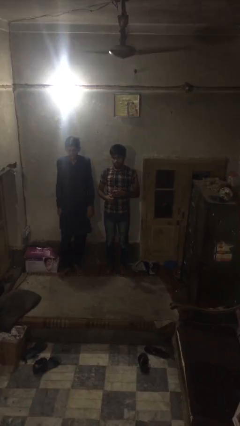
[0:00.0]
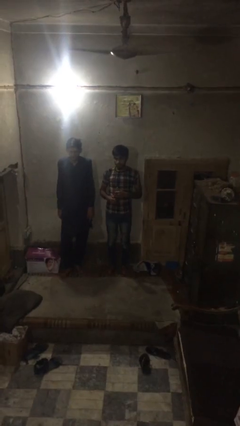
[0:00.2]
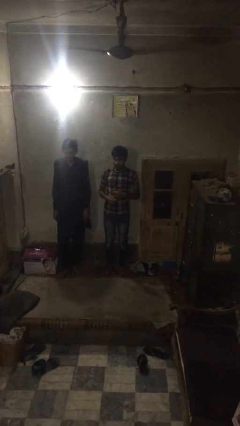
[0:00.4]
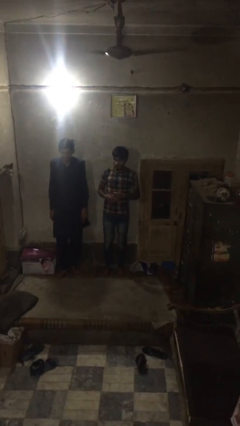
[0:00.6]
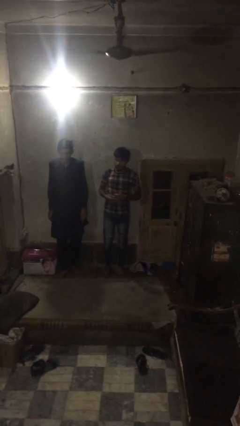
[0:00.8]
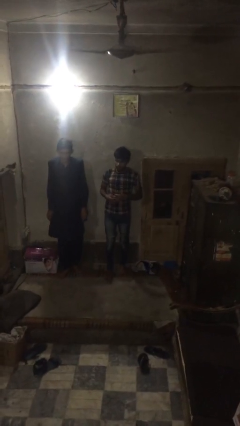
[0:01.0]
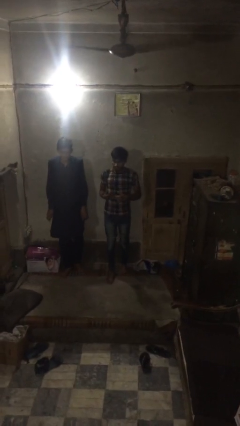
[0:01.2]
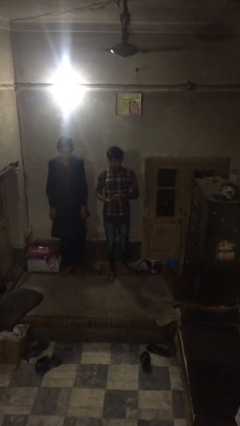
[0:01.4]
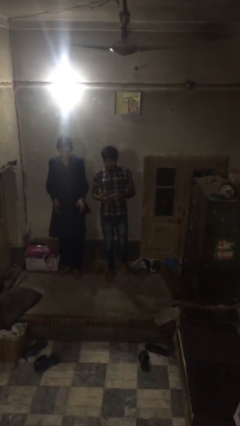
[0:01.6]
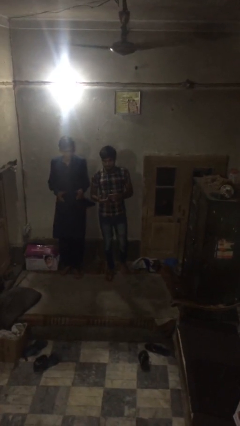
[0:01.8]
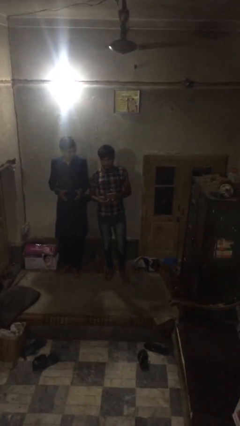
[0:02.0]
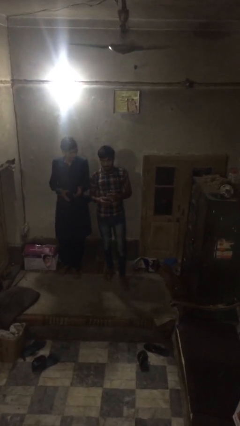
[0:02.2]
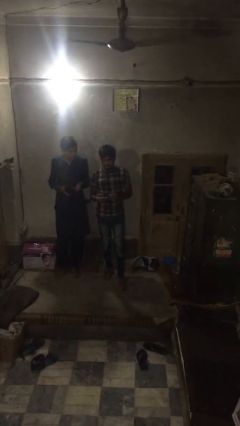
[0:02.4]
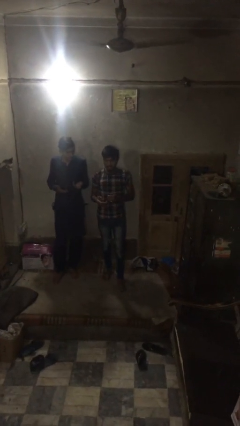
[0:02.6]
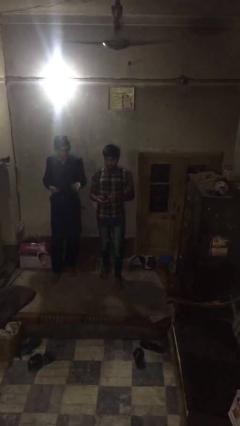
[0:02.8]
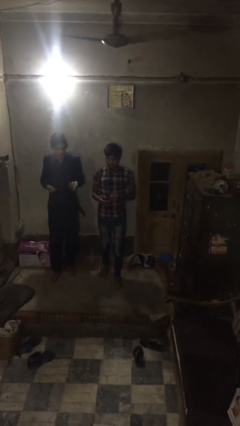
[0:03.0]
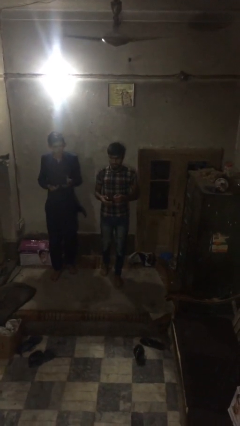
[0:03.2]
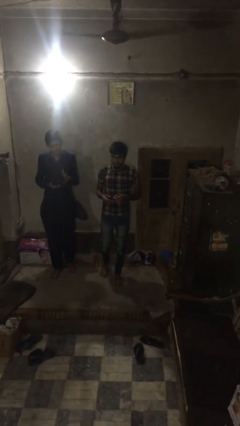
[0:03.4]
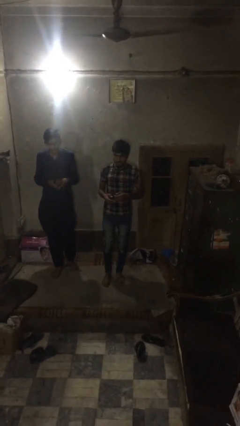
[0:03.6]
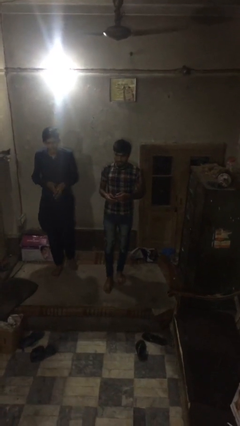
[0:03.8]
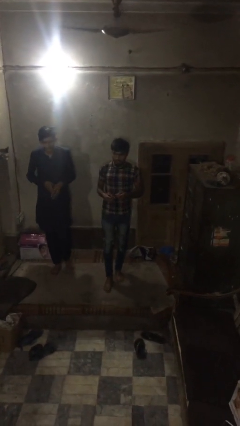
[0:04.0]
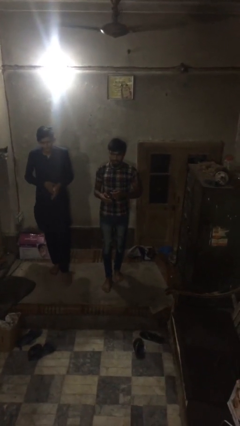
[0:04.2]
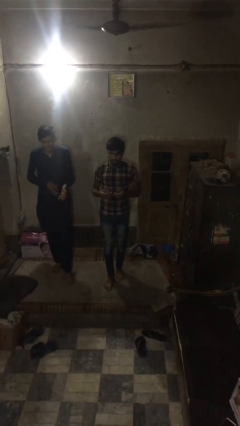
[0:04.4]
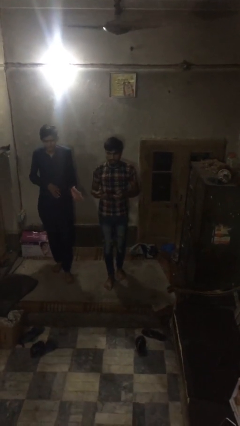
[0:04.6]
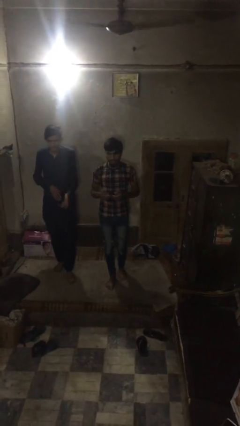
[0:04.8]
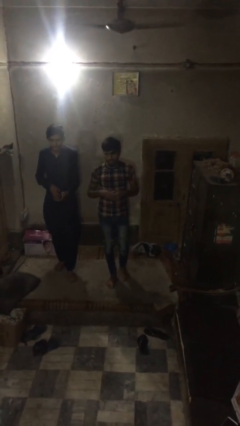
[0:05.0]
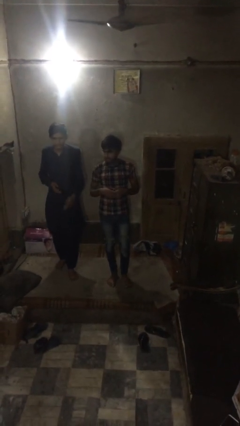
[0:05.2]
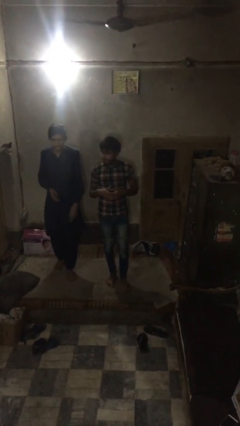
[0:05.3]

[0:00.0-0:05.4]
person talks to person

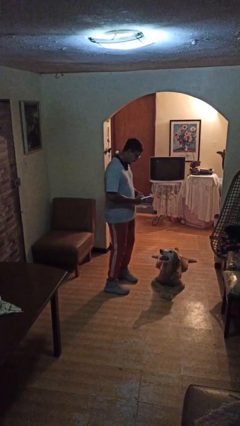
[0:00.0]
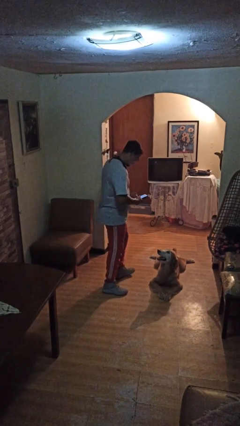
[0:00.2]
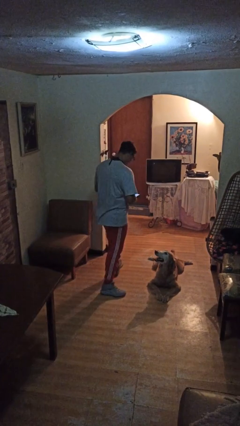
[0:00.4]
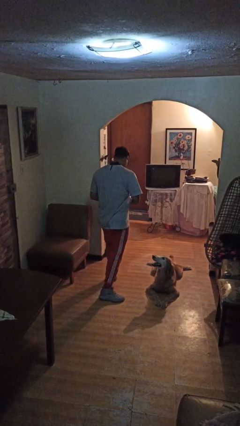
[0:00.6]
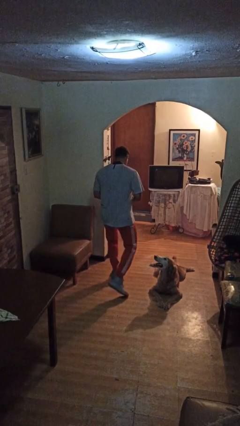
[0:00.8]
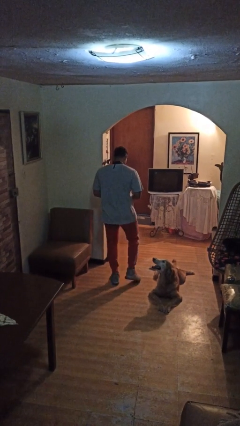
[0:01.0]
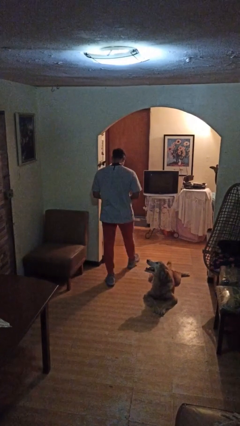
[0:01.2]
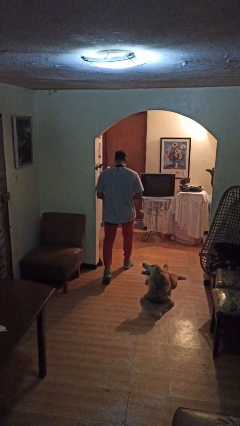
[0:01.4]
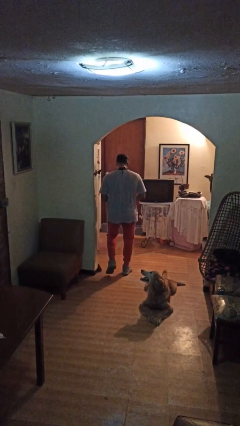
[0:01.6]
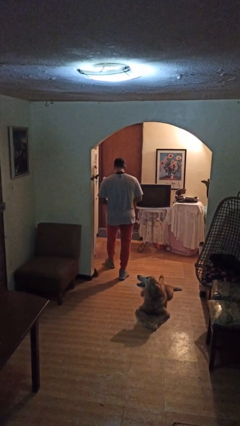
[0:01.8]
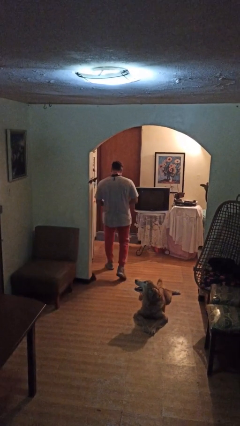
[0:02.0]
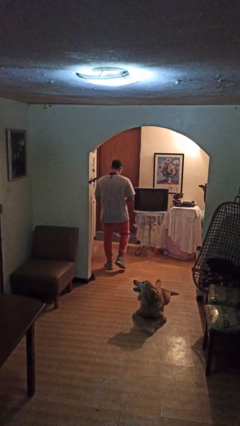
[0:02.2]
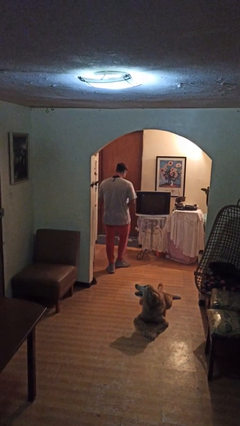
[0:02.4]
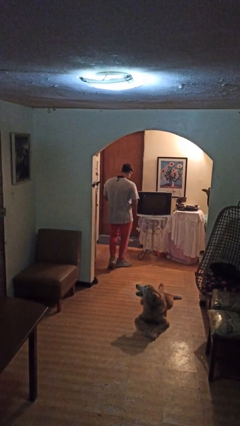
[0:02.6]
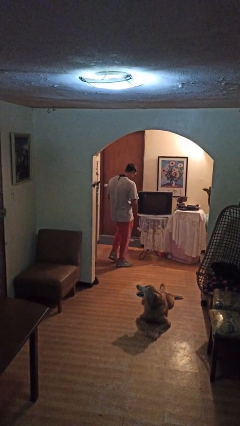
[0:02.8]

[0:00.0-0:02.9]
person exits scene through structure

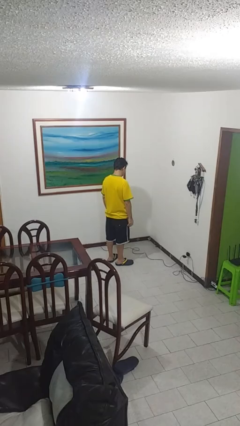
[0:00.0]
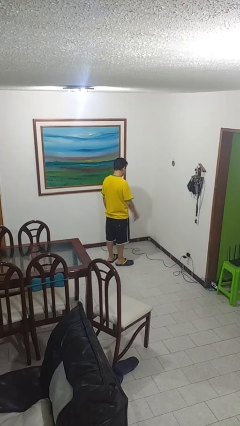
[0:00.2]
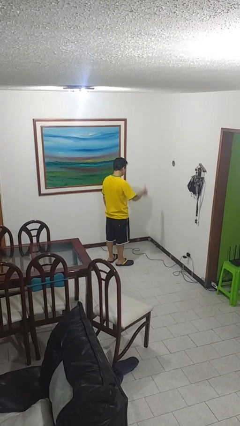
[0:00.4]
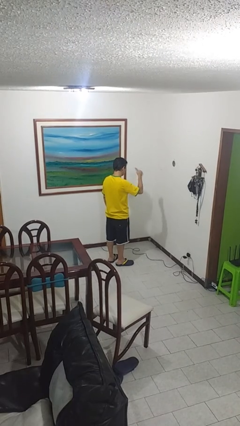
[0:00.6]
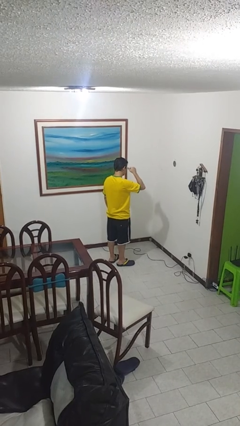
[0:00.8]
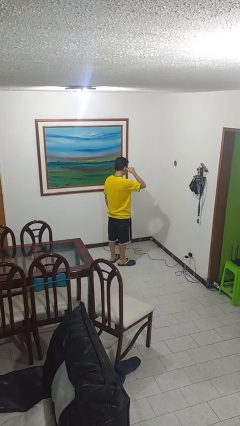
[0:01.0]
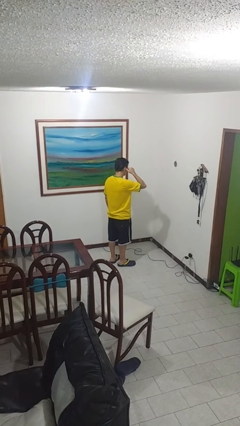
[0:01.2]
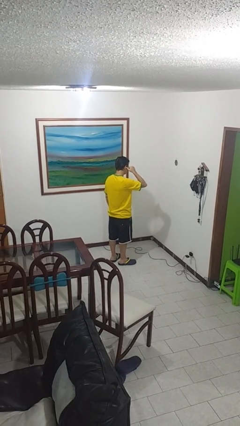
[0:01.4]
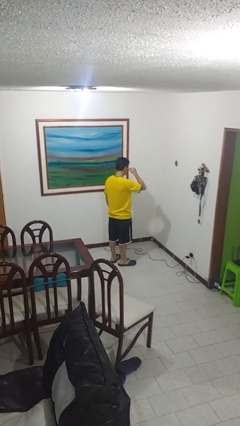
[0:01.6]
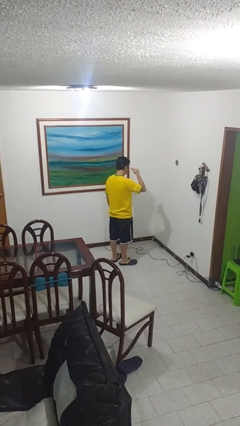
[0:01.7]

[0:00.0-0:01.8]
person gestures call me

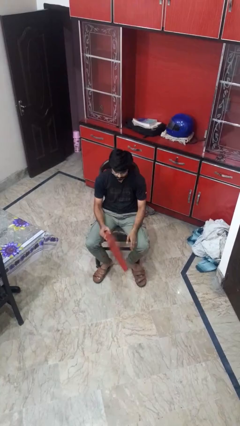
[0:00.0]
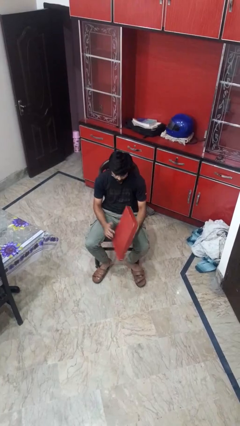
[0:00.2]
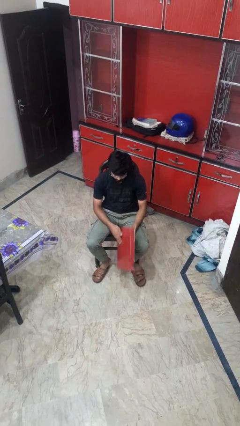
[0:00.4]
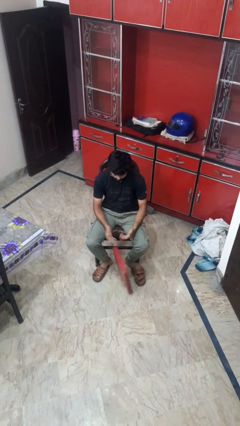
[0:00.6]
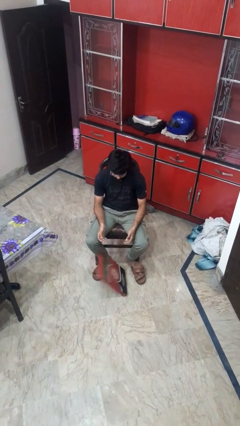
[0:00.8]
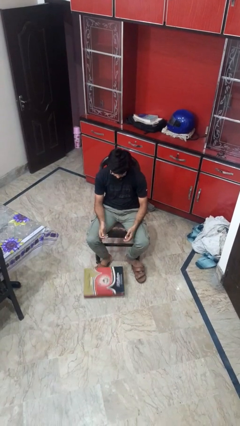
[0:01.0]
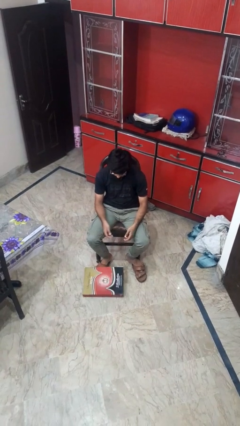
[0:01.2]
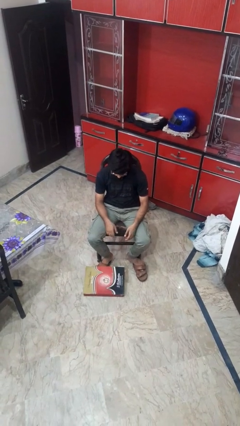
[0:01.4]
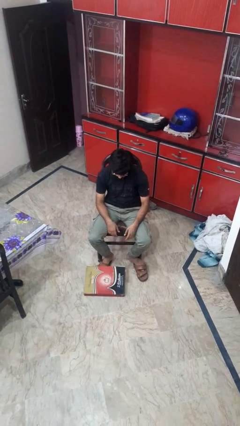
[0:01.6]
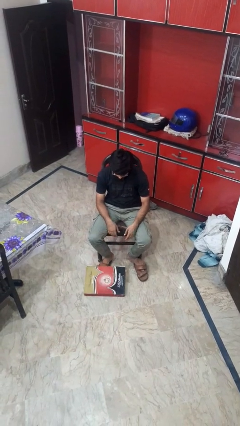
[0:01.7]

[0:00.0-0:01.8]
person drops object

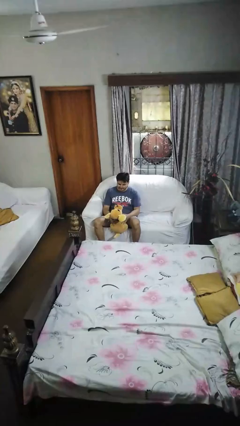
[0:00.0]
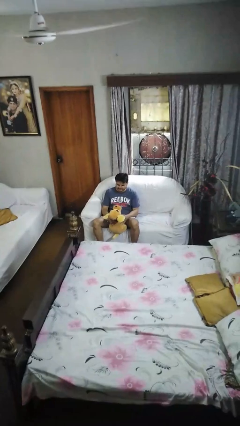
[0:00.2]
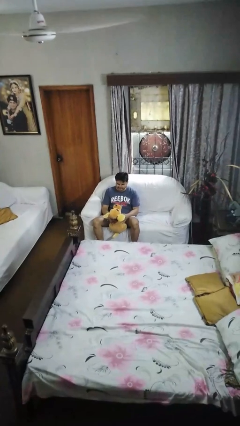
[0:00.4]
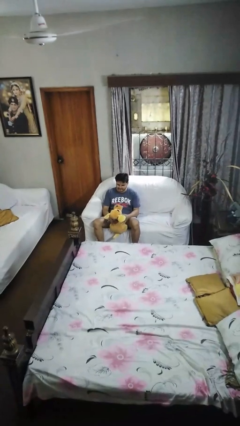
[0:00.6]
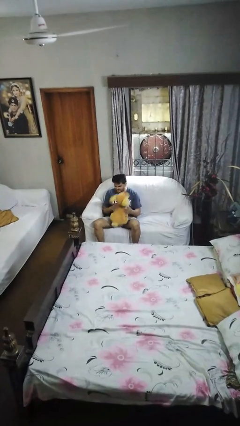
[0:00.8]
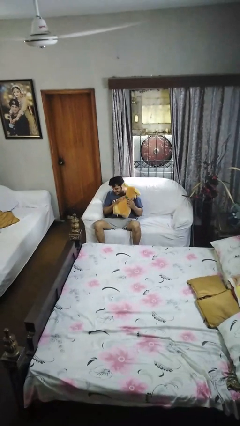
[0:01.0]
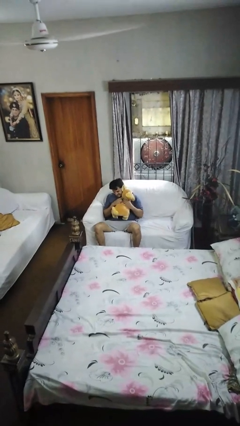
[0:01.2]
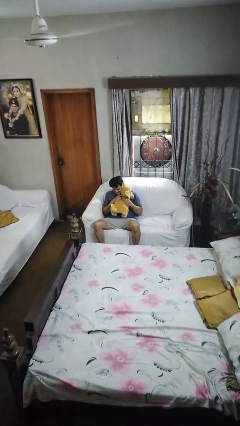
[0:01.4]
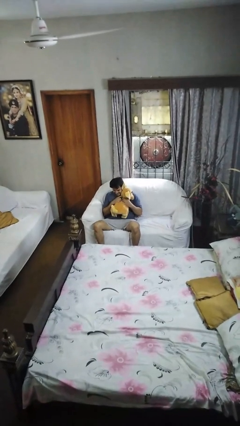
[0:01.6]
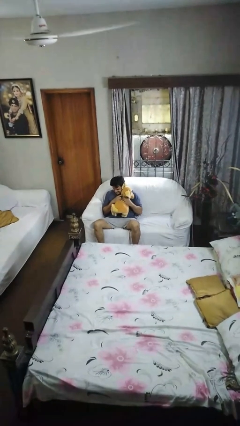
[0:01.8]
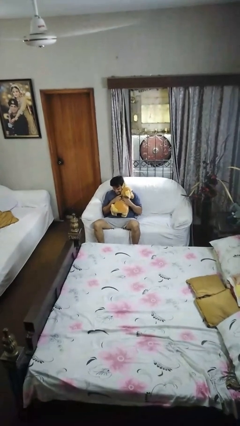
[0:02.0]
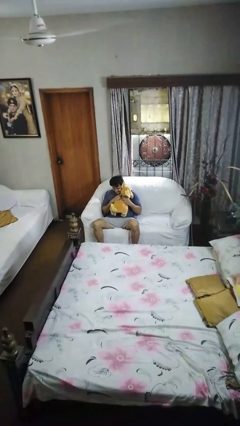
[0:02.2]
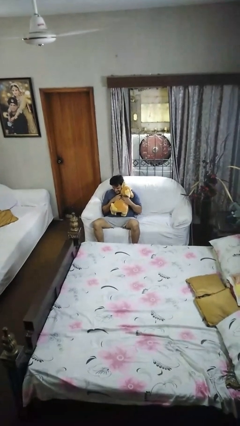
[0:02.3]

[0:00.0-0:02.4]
person hugs stuffed animal

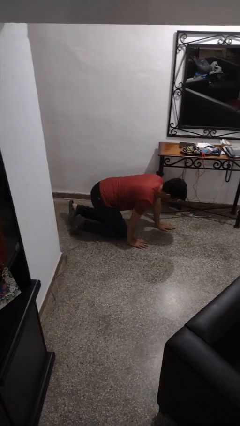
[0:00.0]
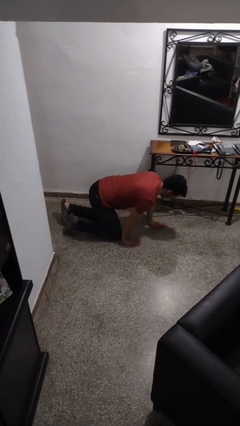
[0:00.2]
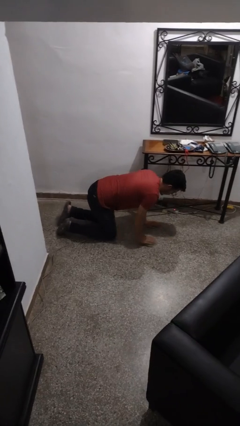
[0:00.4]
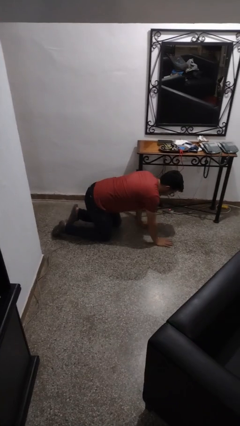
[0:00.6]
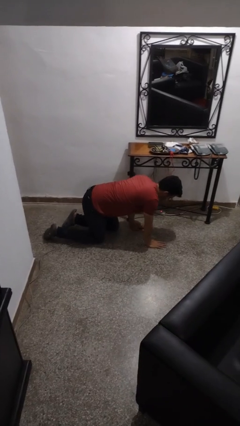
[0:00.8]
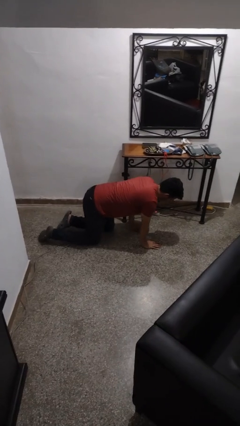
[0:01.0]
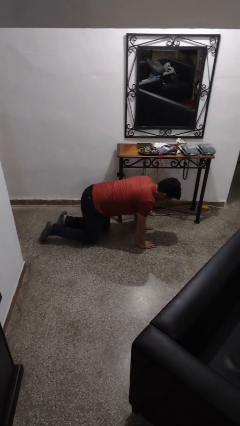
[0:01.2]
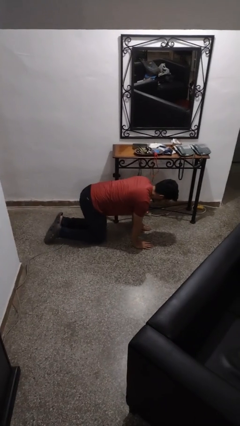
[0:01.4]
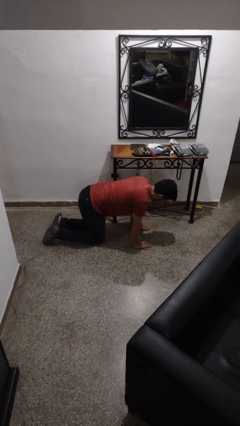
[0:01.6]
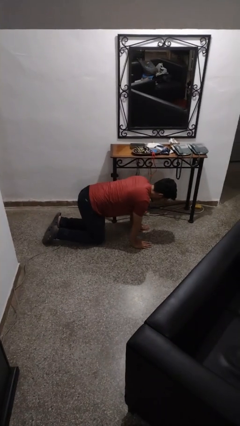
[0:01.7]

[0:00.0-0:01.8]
person crawls

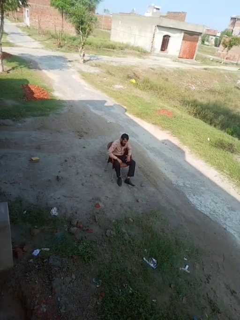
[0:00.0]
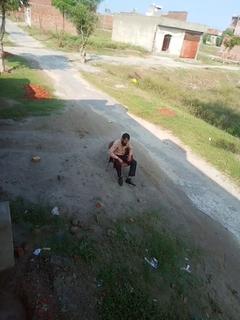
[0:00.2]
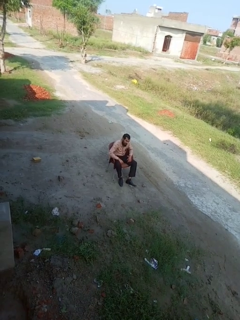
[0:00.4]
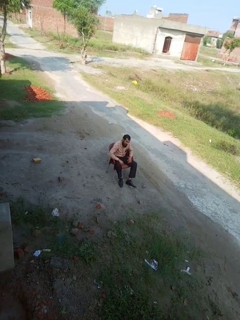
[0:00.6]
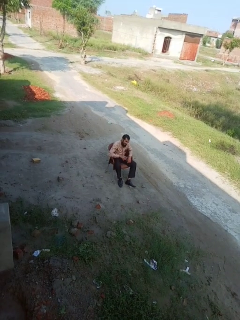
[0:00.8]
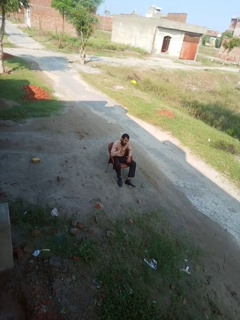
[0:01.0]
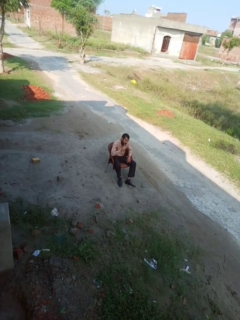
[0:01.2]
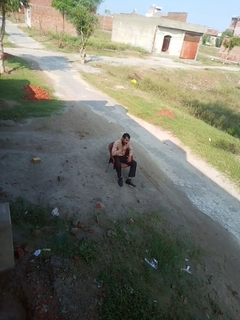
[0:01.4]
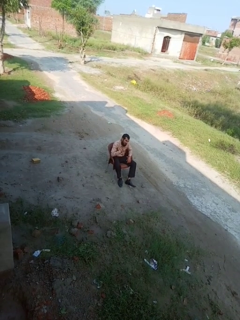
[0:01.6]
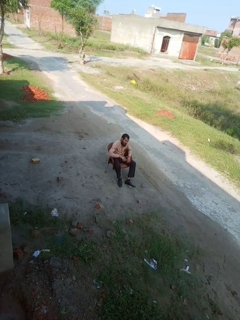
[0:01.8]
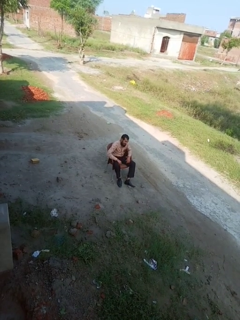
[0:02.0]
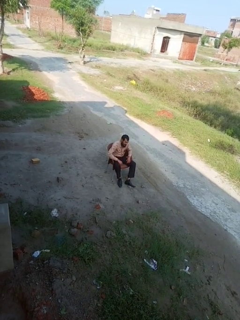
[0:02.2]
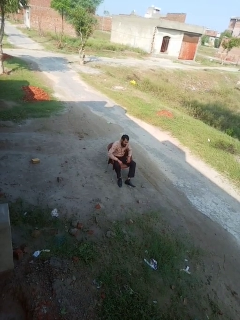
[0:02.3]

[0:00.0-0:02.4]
person gestures number four
